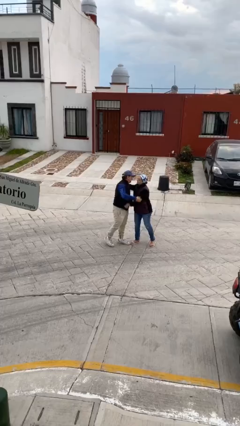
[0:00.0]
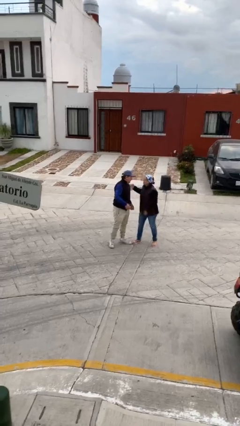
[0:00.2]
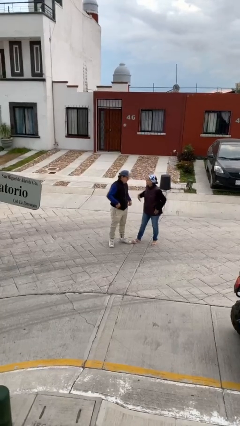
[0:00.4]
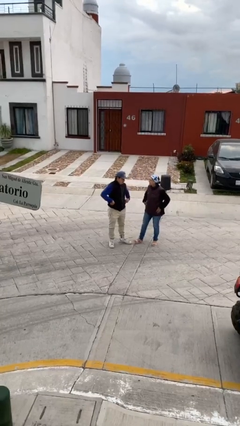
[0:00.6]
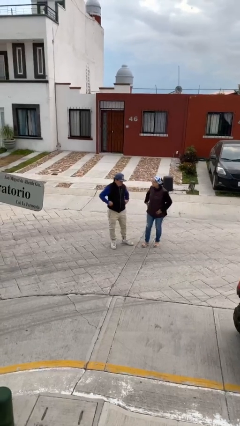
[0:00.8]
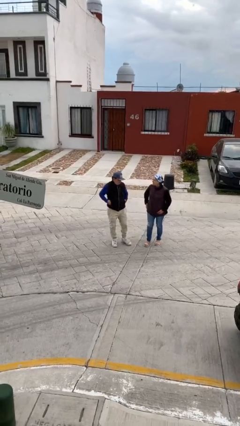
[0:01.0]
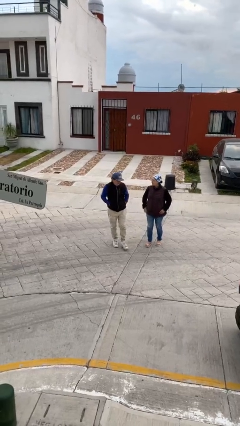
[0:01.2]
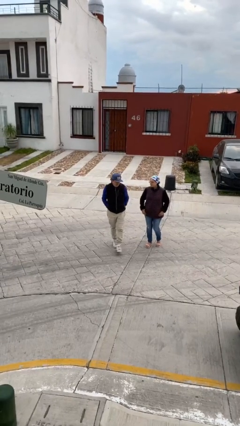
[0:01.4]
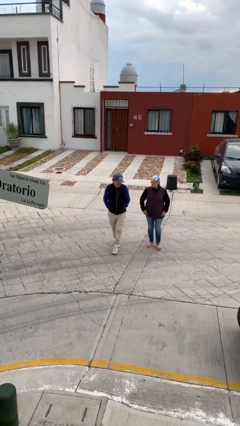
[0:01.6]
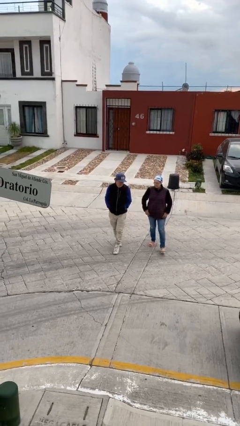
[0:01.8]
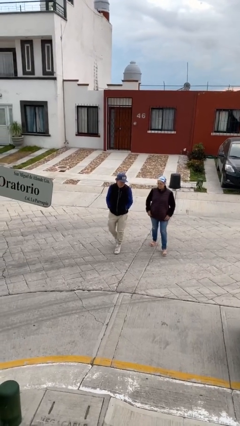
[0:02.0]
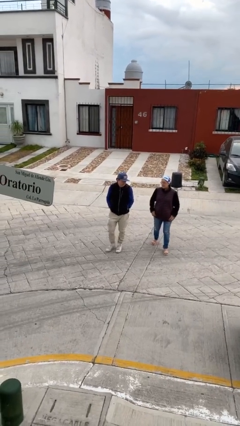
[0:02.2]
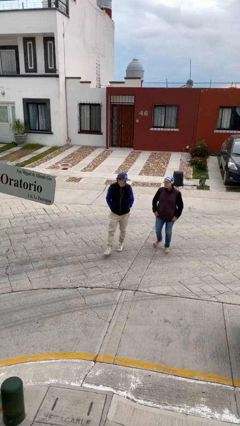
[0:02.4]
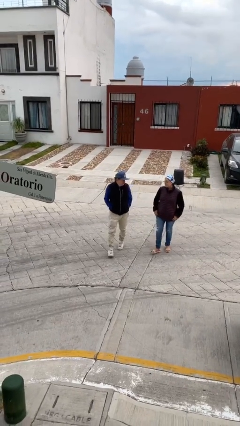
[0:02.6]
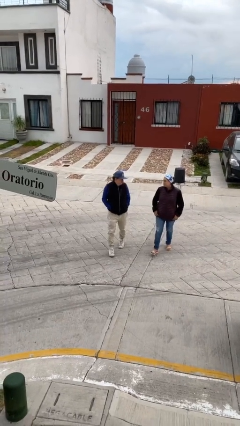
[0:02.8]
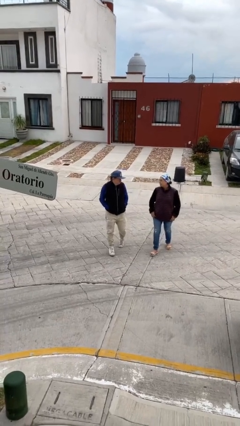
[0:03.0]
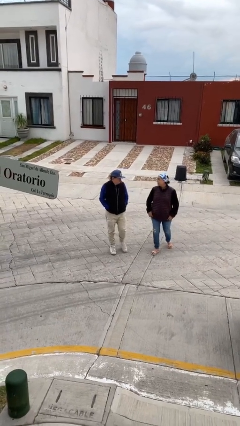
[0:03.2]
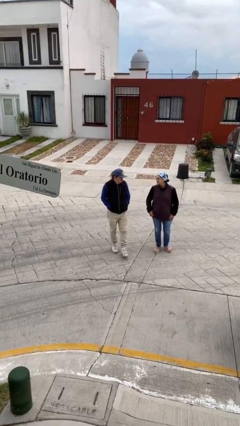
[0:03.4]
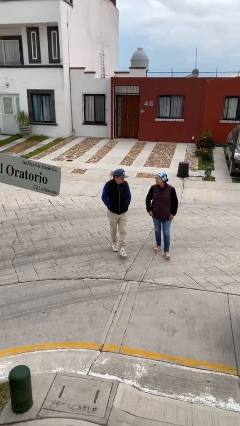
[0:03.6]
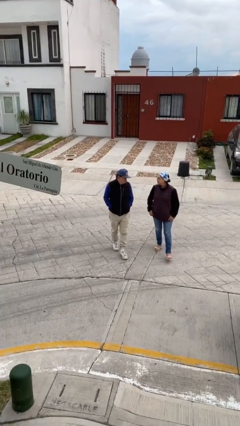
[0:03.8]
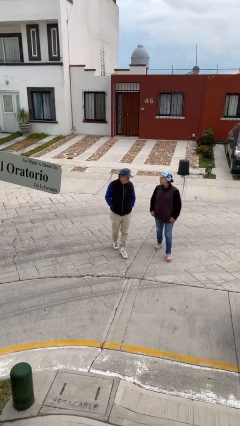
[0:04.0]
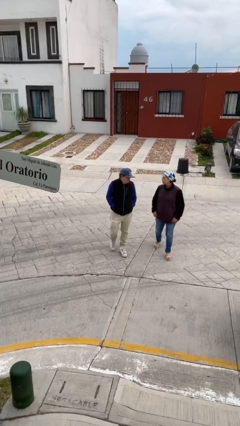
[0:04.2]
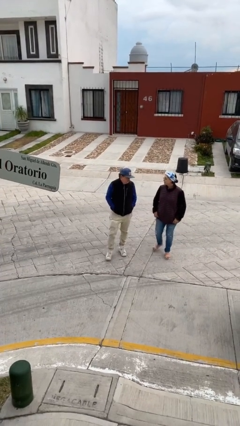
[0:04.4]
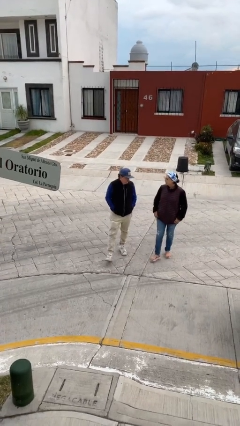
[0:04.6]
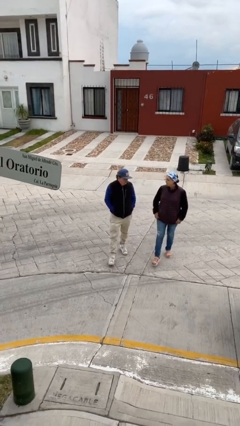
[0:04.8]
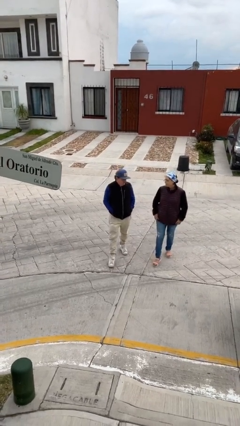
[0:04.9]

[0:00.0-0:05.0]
person talks to person

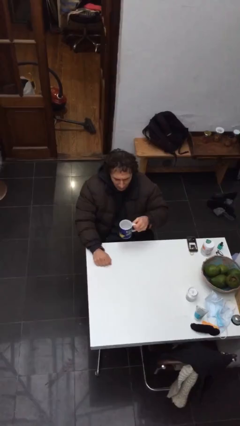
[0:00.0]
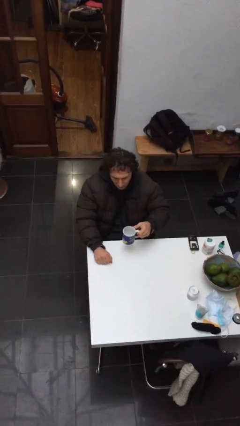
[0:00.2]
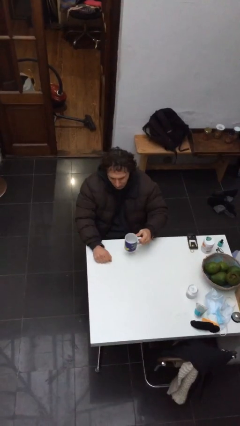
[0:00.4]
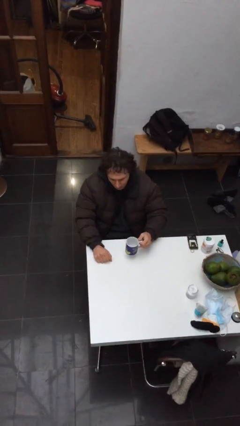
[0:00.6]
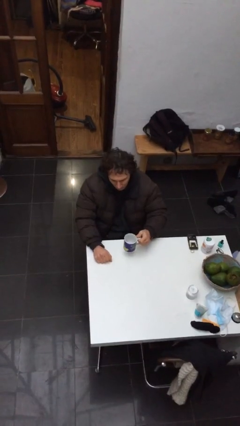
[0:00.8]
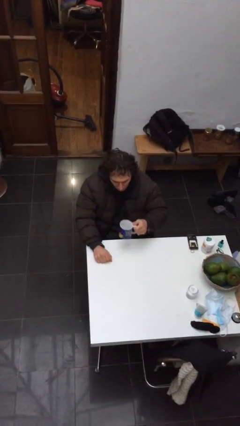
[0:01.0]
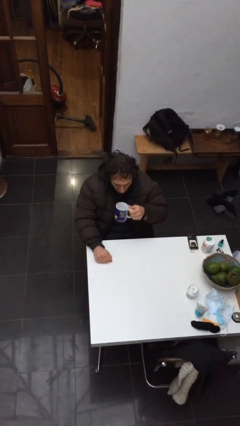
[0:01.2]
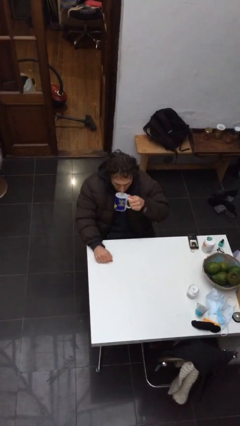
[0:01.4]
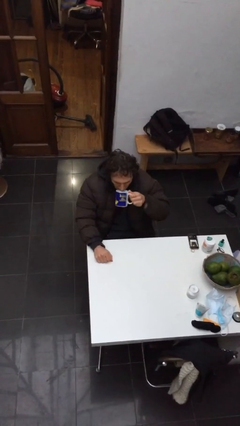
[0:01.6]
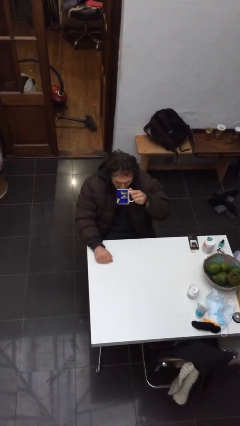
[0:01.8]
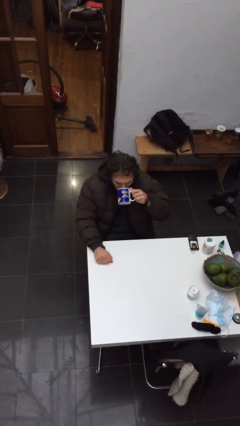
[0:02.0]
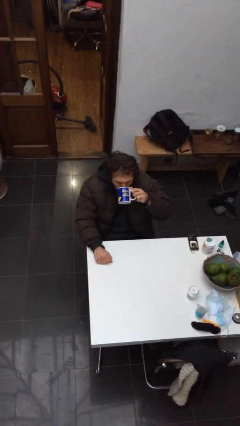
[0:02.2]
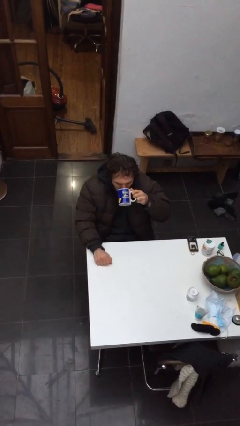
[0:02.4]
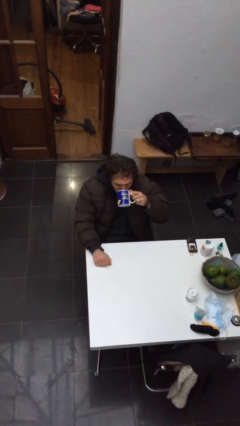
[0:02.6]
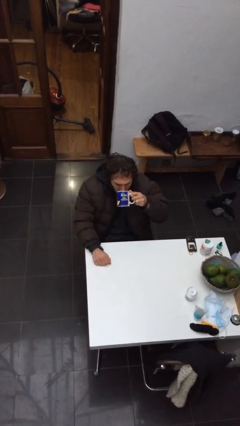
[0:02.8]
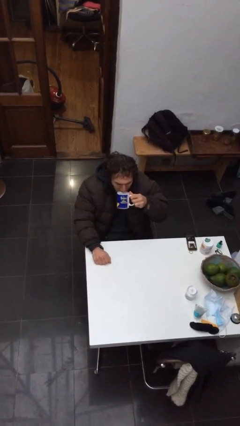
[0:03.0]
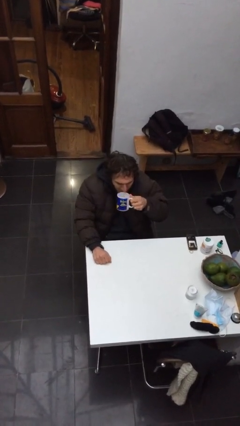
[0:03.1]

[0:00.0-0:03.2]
person drinks from mug

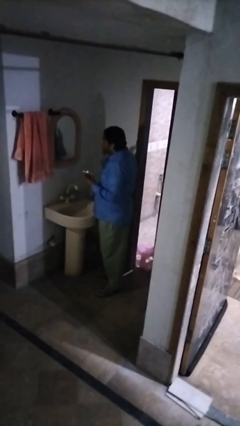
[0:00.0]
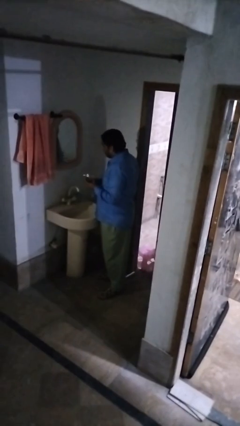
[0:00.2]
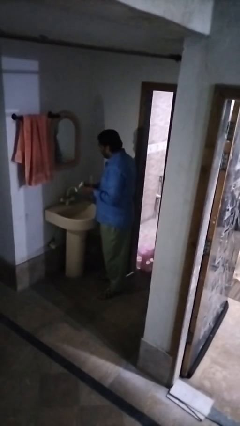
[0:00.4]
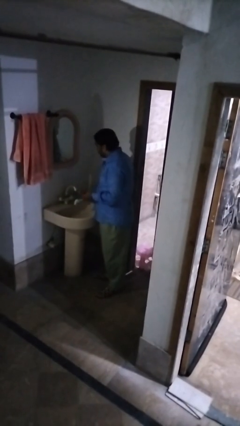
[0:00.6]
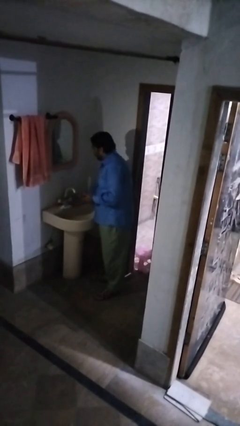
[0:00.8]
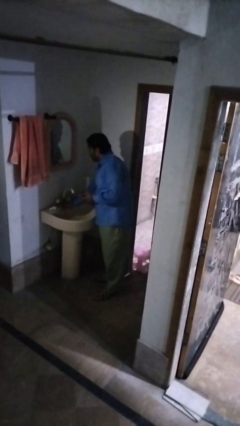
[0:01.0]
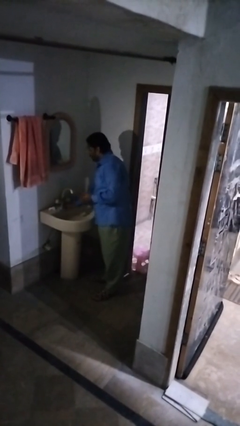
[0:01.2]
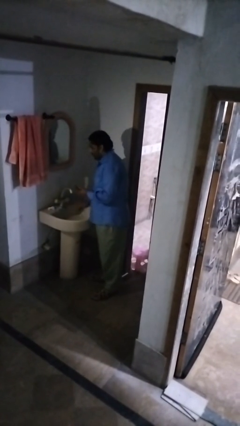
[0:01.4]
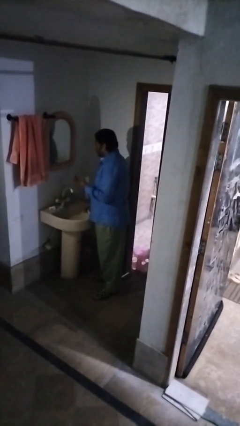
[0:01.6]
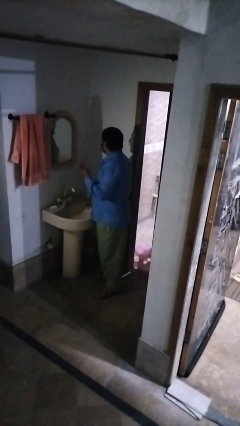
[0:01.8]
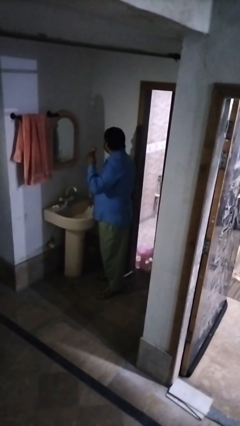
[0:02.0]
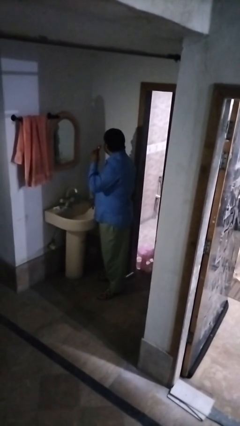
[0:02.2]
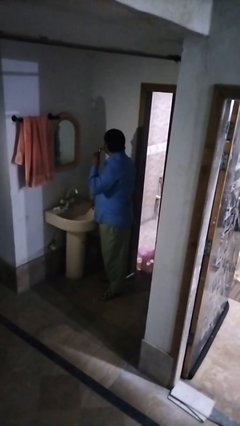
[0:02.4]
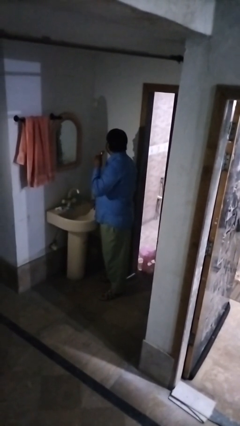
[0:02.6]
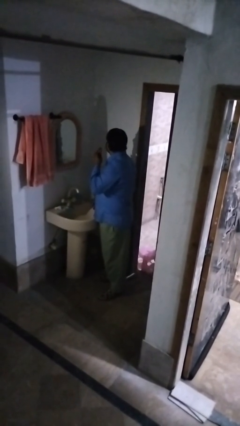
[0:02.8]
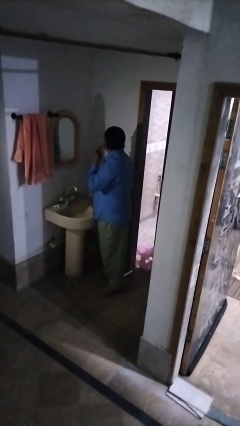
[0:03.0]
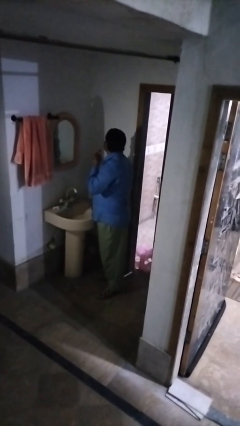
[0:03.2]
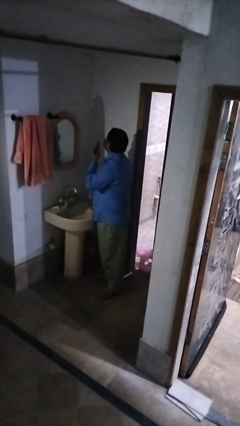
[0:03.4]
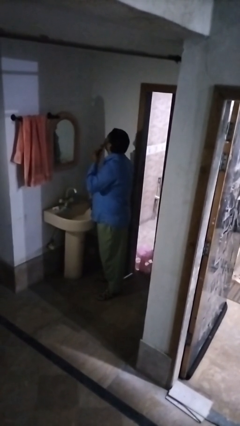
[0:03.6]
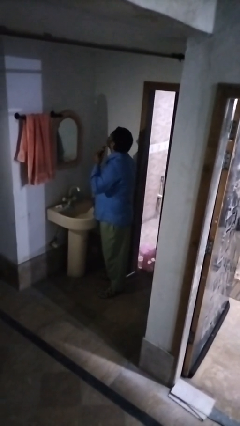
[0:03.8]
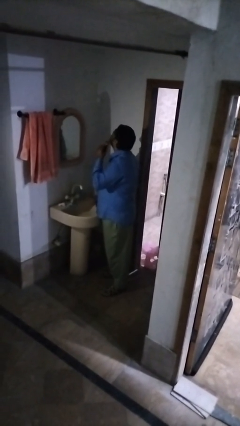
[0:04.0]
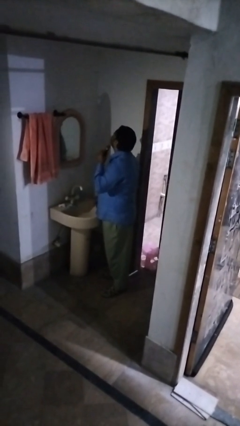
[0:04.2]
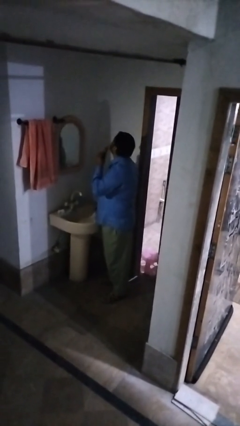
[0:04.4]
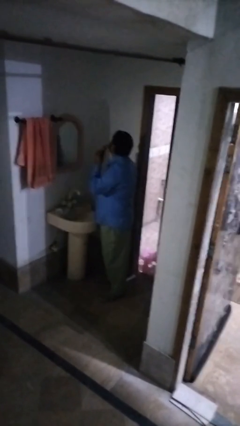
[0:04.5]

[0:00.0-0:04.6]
person shaves face

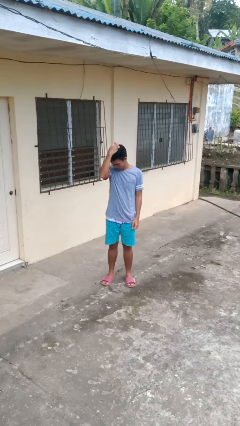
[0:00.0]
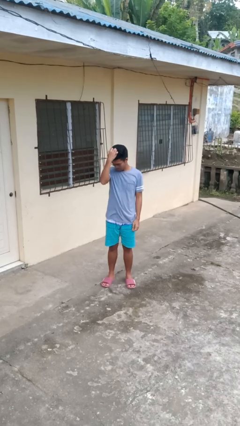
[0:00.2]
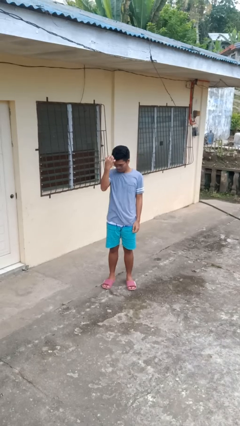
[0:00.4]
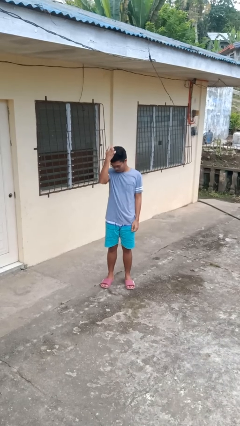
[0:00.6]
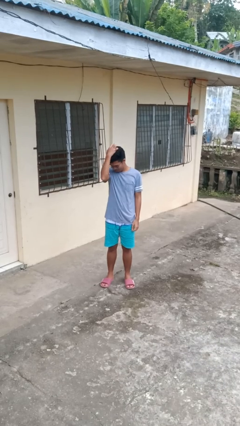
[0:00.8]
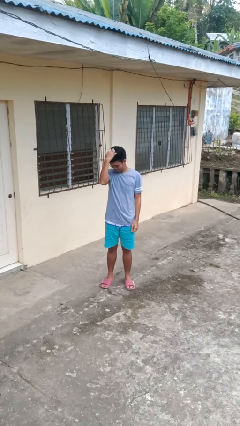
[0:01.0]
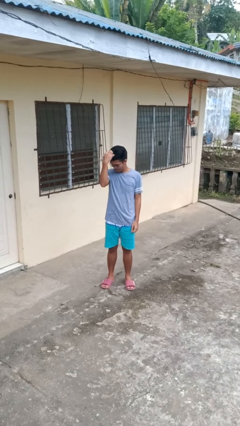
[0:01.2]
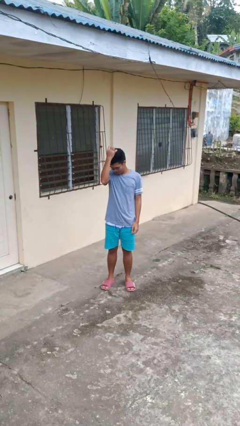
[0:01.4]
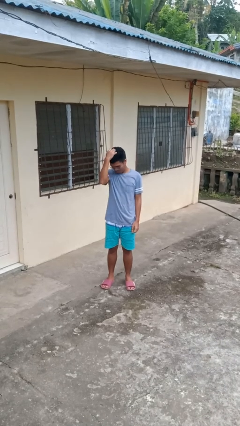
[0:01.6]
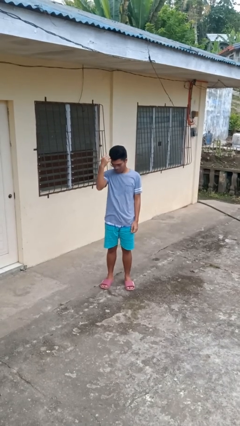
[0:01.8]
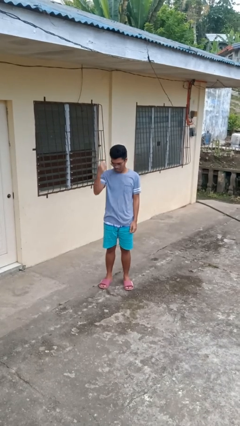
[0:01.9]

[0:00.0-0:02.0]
person brushes hair

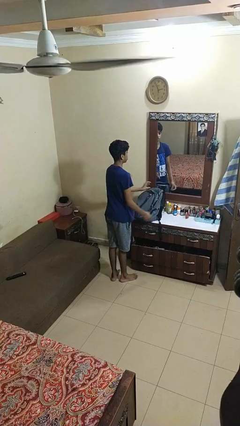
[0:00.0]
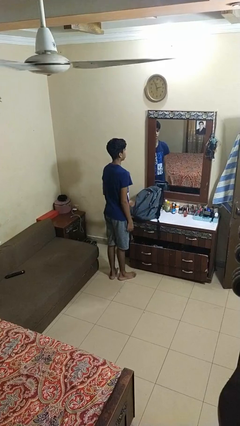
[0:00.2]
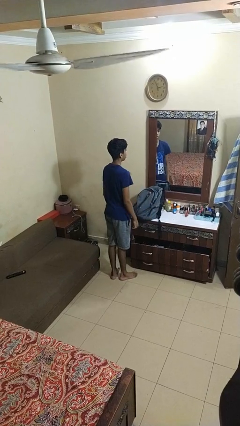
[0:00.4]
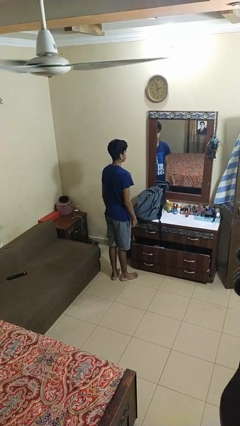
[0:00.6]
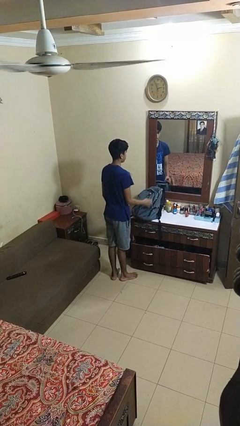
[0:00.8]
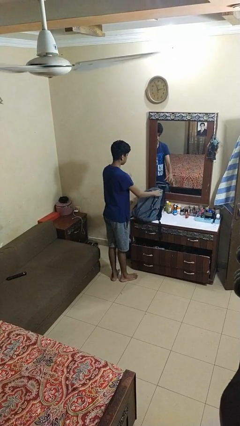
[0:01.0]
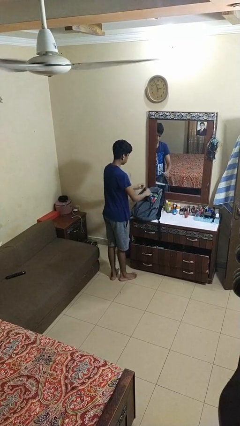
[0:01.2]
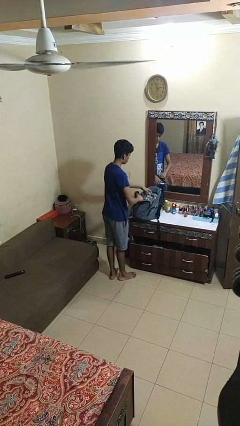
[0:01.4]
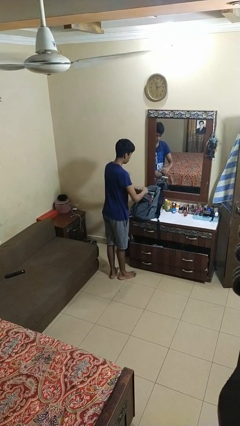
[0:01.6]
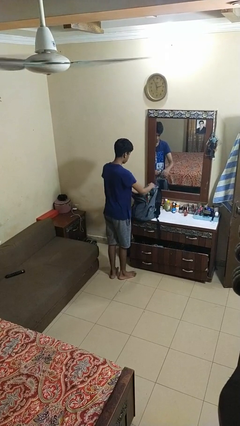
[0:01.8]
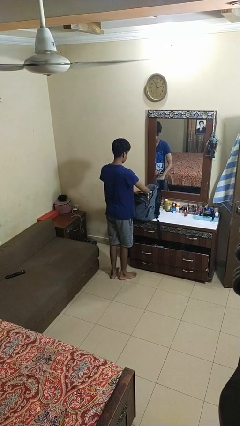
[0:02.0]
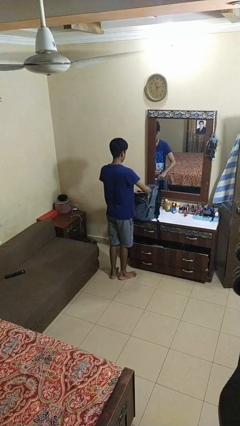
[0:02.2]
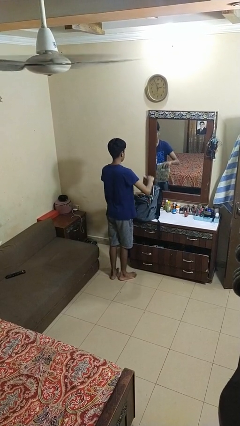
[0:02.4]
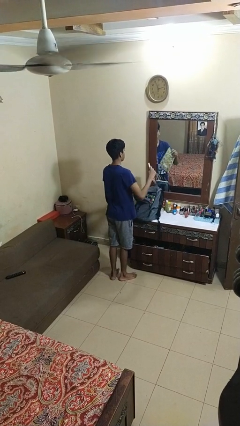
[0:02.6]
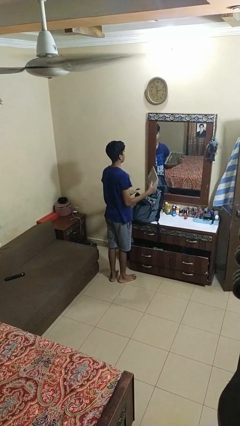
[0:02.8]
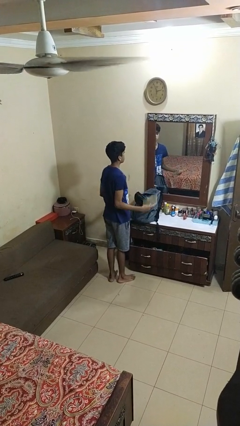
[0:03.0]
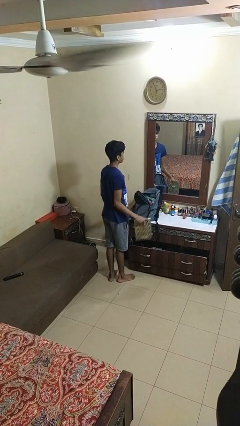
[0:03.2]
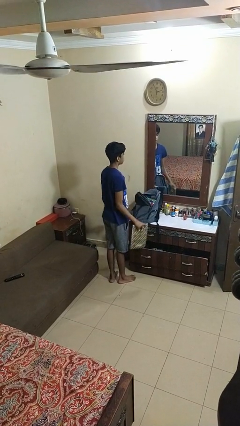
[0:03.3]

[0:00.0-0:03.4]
person takes object from bag
